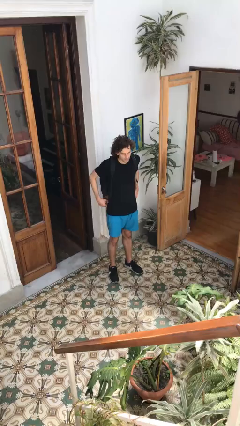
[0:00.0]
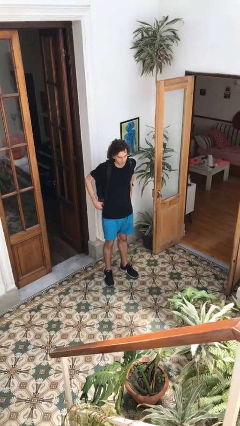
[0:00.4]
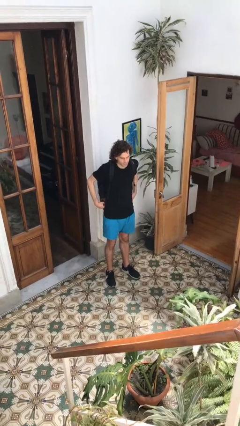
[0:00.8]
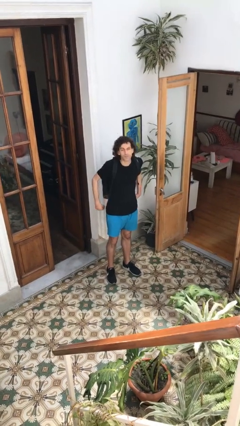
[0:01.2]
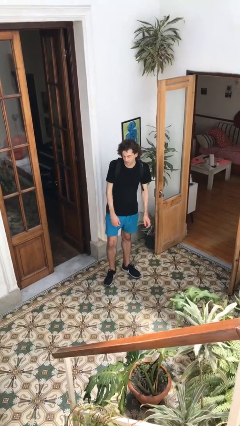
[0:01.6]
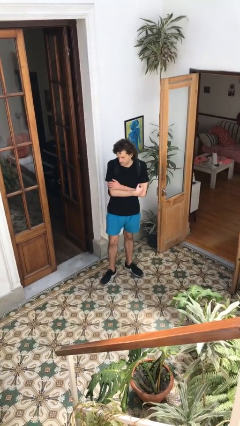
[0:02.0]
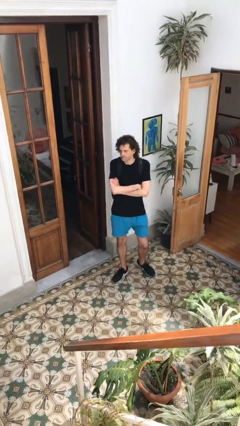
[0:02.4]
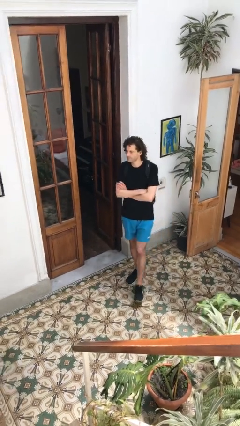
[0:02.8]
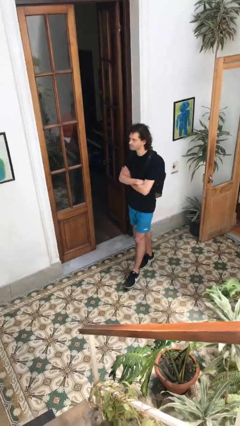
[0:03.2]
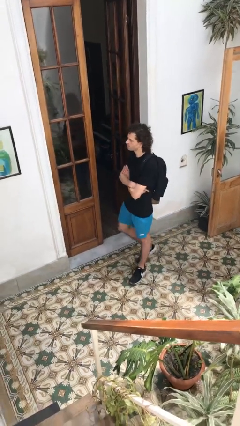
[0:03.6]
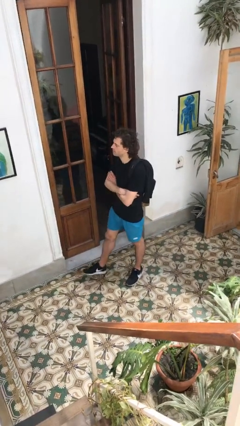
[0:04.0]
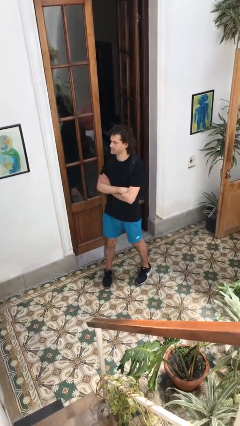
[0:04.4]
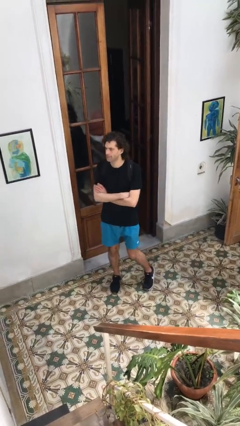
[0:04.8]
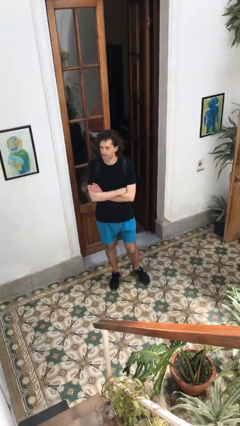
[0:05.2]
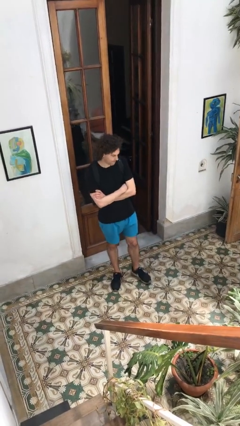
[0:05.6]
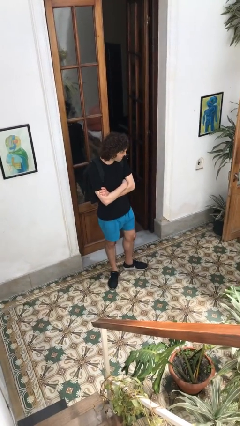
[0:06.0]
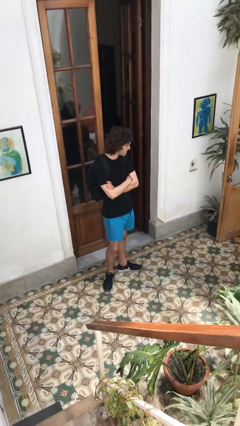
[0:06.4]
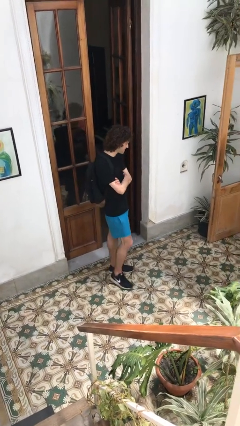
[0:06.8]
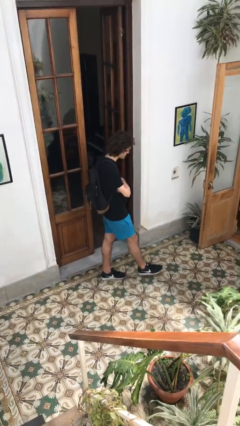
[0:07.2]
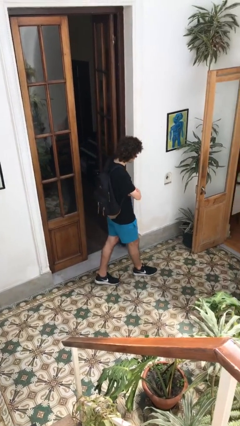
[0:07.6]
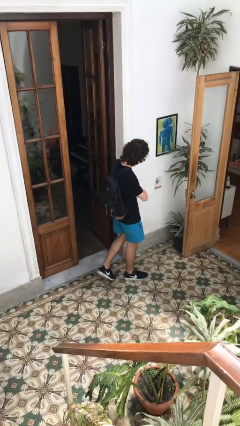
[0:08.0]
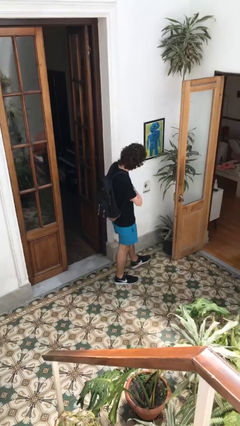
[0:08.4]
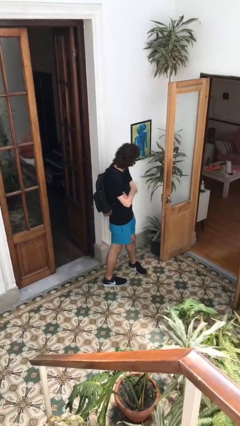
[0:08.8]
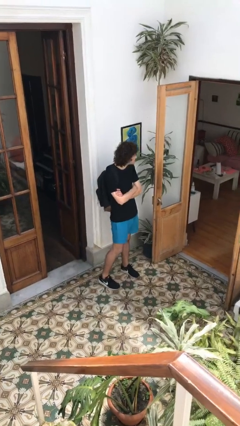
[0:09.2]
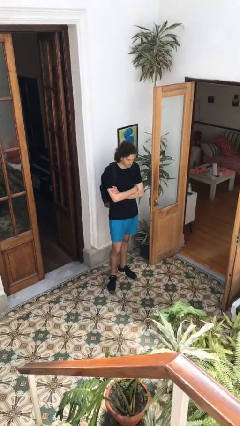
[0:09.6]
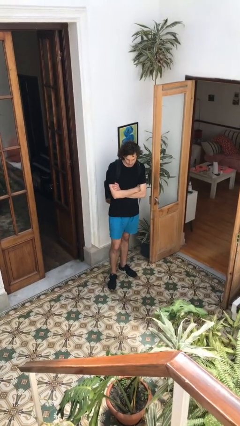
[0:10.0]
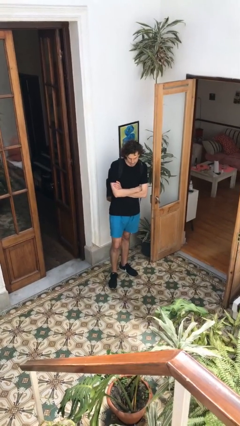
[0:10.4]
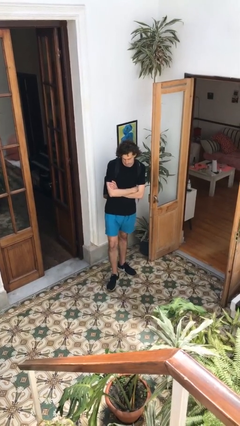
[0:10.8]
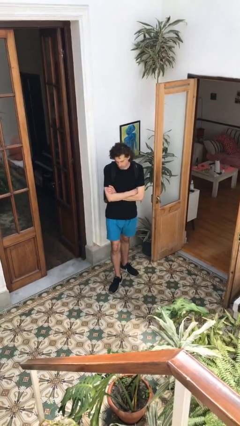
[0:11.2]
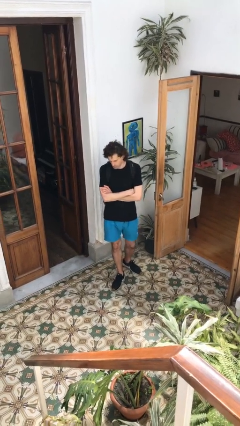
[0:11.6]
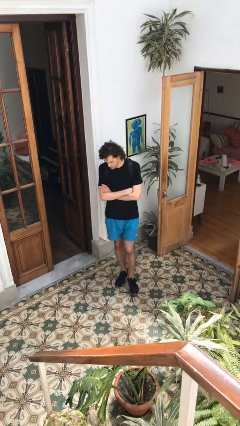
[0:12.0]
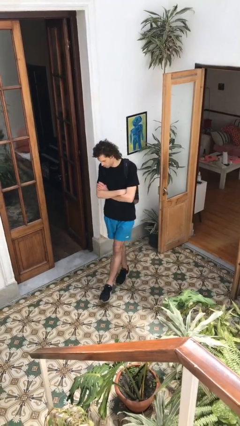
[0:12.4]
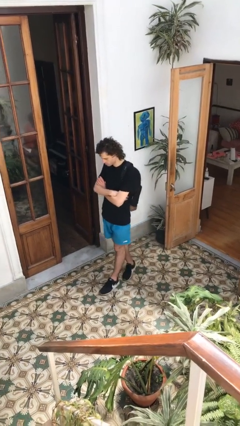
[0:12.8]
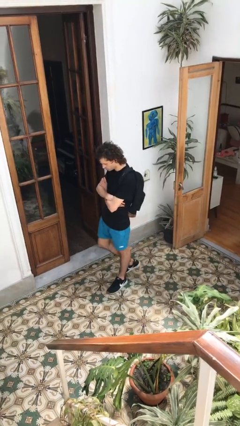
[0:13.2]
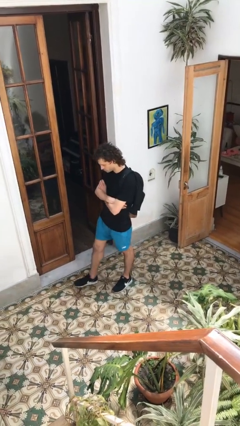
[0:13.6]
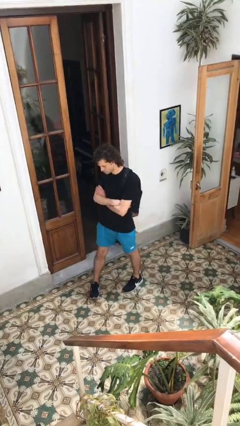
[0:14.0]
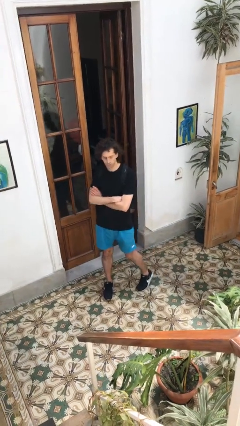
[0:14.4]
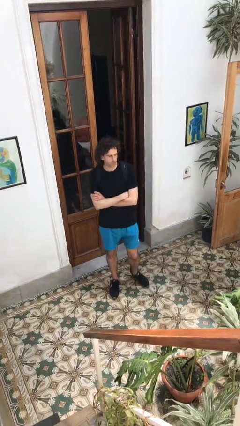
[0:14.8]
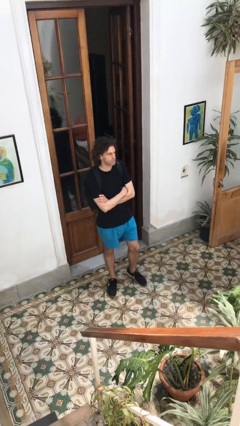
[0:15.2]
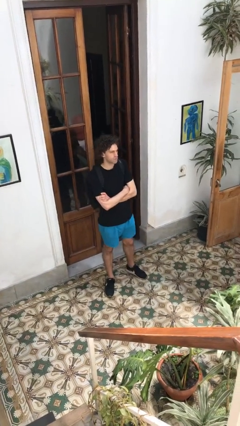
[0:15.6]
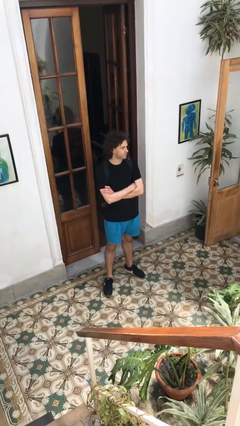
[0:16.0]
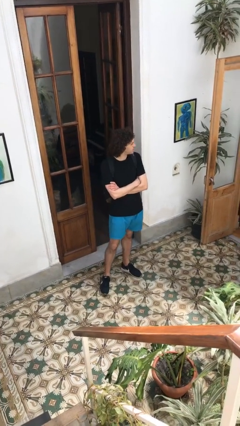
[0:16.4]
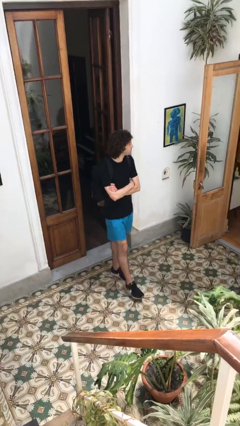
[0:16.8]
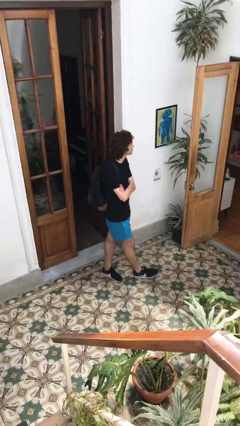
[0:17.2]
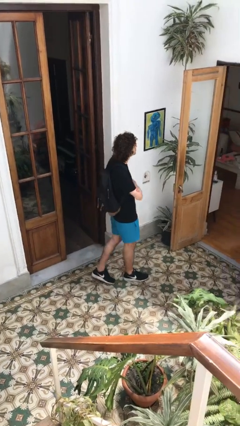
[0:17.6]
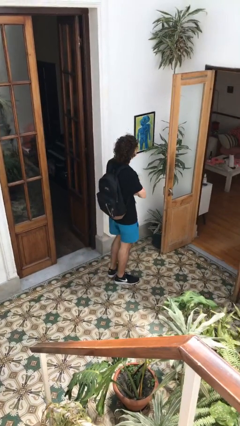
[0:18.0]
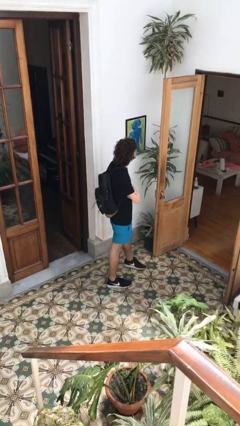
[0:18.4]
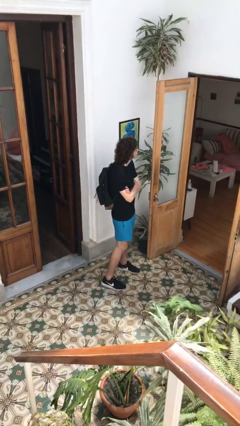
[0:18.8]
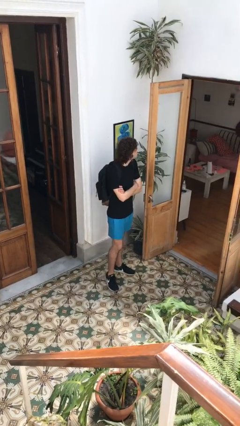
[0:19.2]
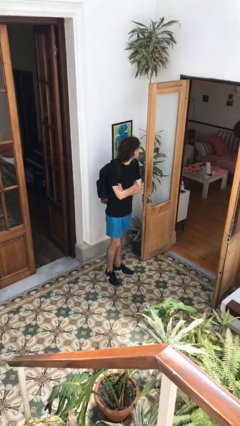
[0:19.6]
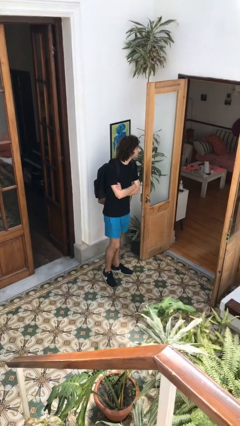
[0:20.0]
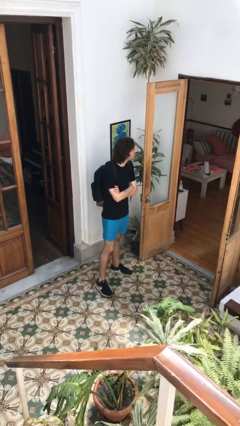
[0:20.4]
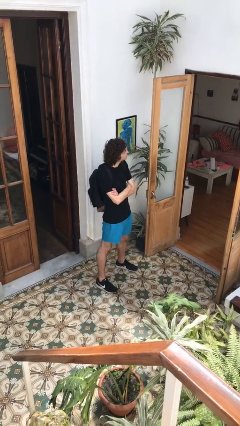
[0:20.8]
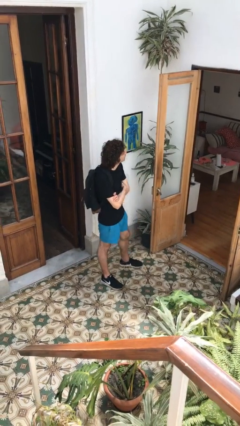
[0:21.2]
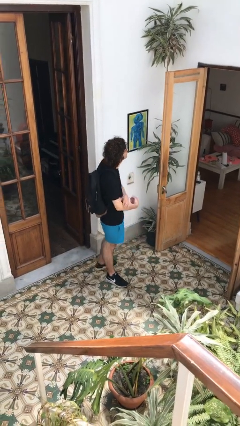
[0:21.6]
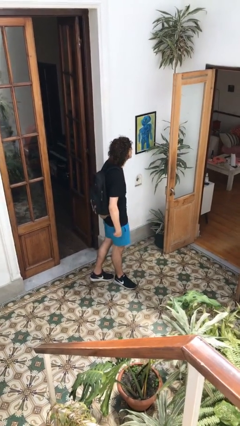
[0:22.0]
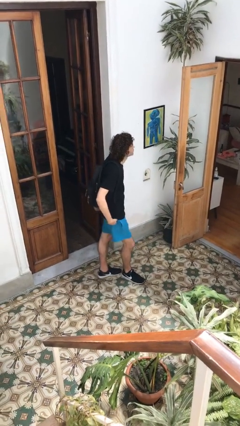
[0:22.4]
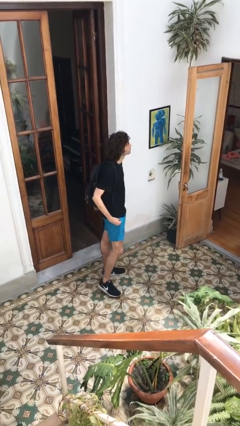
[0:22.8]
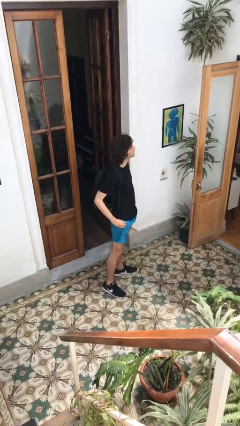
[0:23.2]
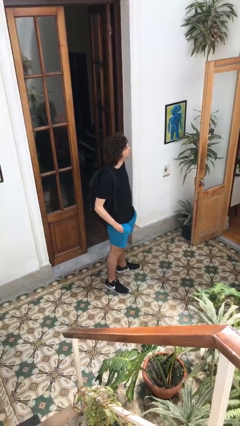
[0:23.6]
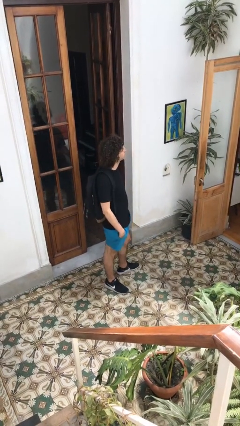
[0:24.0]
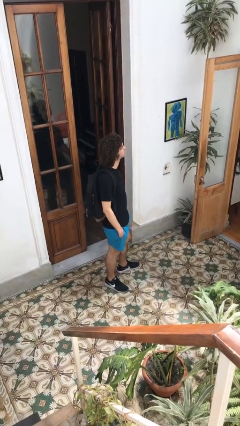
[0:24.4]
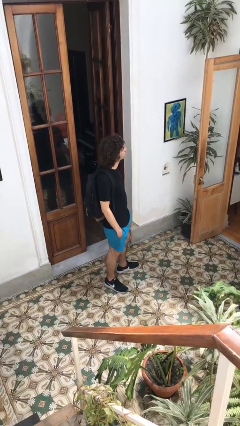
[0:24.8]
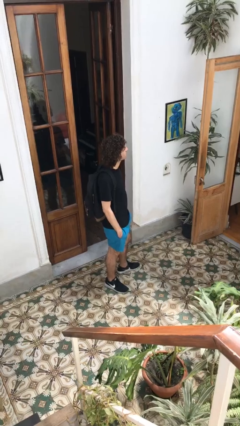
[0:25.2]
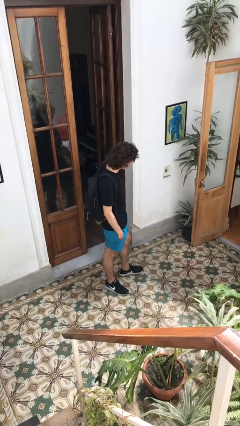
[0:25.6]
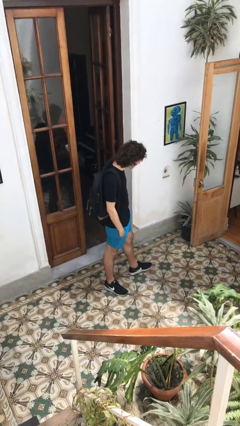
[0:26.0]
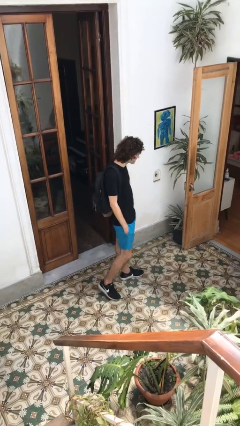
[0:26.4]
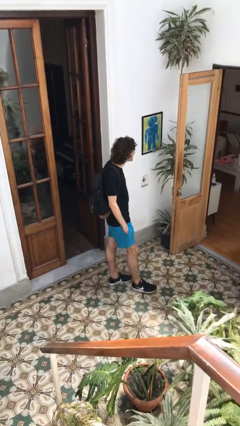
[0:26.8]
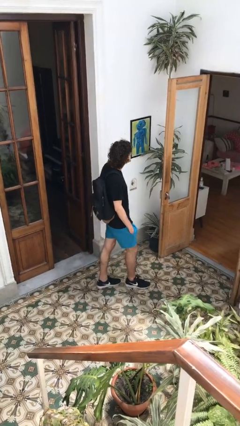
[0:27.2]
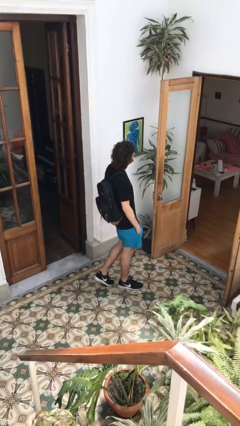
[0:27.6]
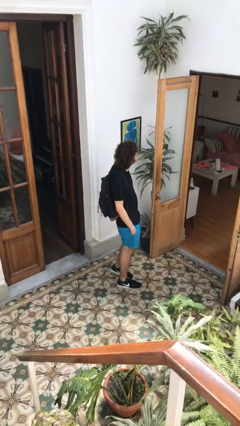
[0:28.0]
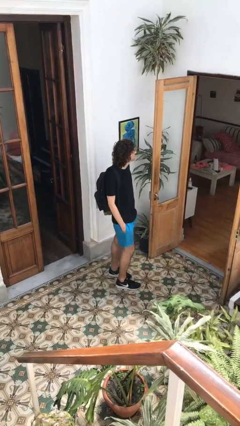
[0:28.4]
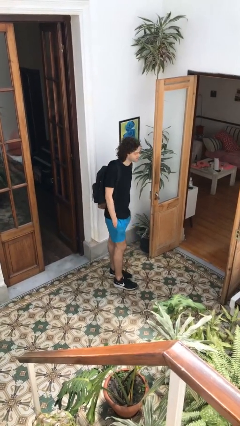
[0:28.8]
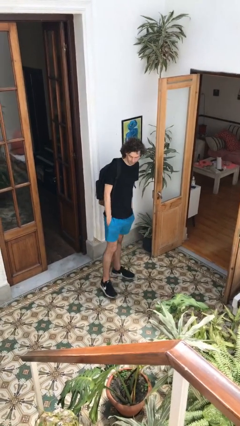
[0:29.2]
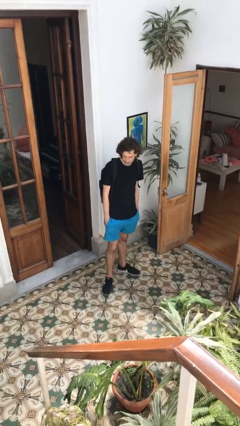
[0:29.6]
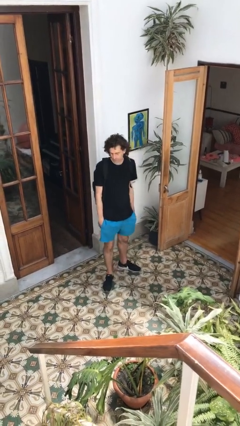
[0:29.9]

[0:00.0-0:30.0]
person walks

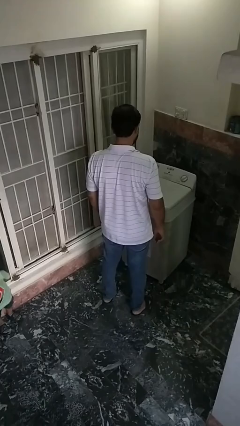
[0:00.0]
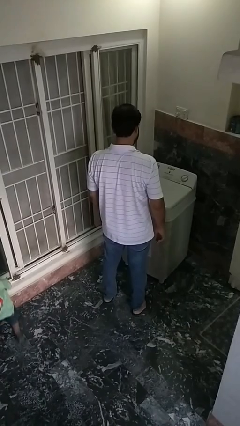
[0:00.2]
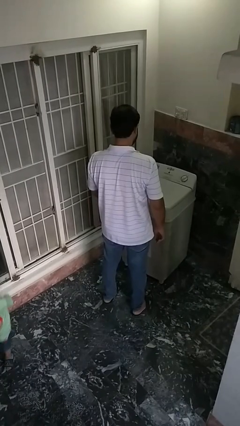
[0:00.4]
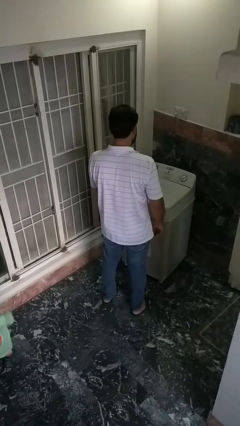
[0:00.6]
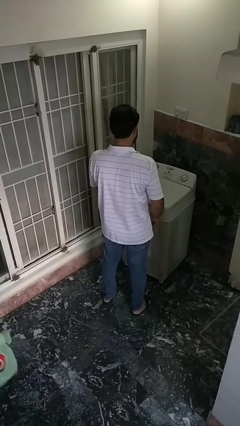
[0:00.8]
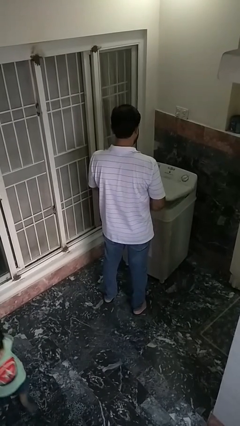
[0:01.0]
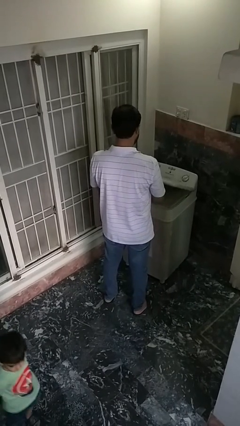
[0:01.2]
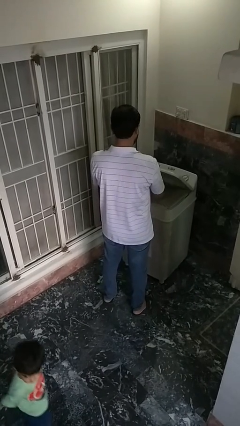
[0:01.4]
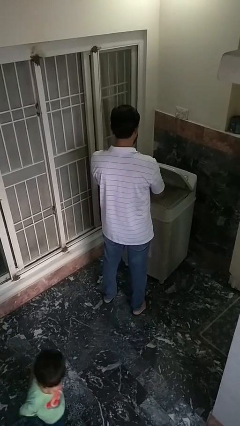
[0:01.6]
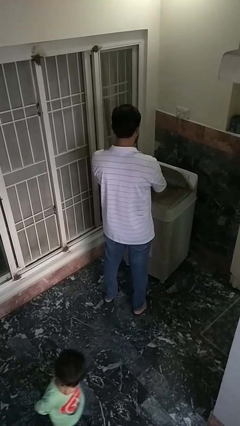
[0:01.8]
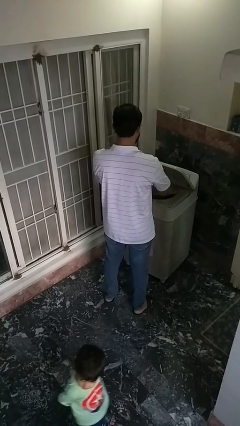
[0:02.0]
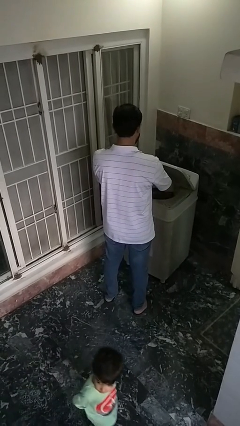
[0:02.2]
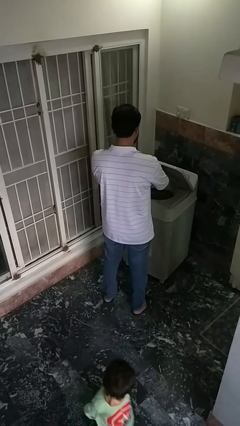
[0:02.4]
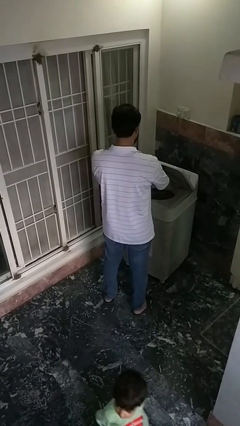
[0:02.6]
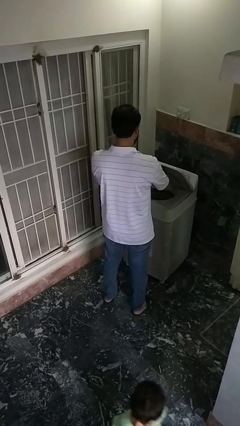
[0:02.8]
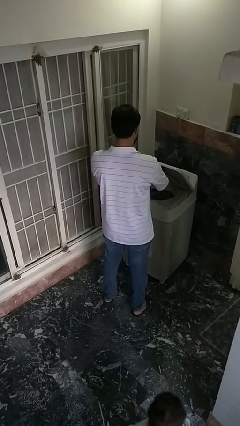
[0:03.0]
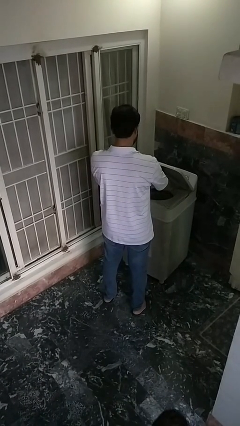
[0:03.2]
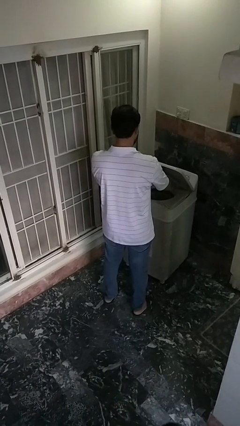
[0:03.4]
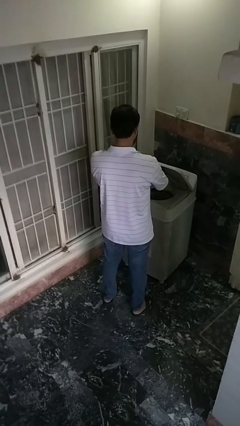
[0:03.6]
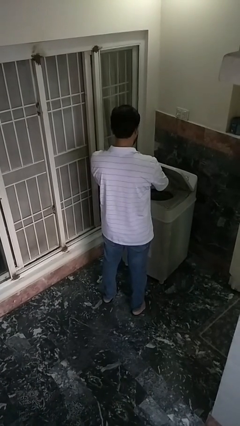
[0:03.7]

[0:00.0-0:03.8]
person opens clothes washer
